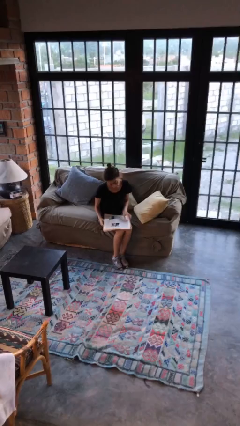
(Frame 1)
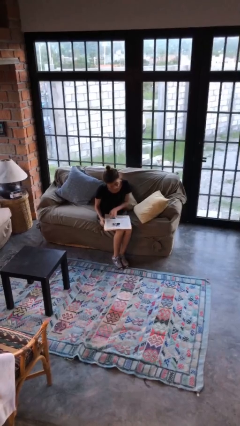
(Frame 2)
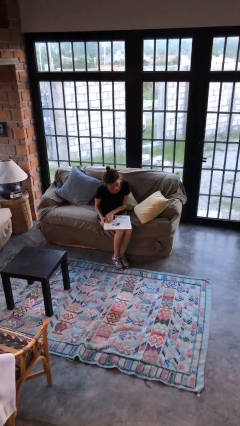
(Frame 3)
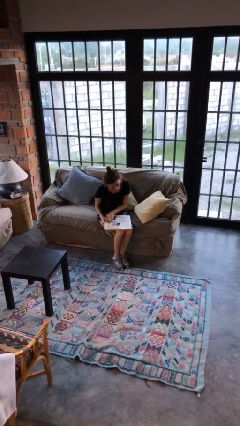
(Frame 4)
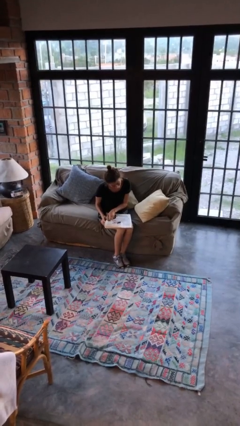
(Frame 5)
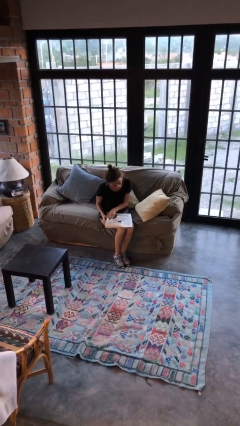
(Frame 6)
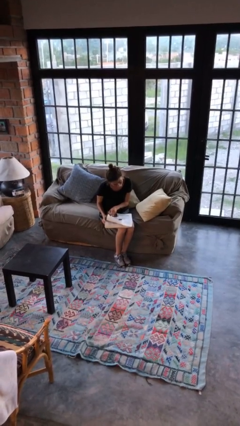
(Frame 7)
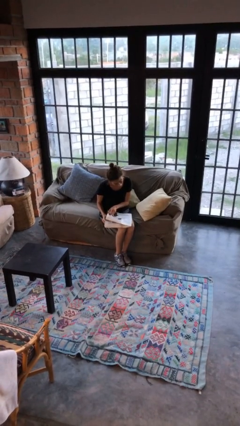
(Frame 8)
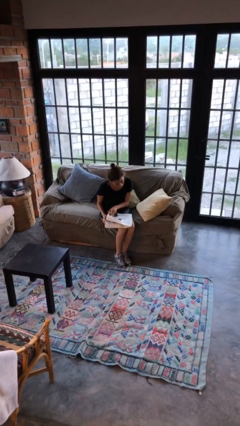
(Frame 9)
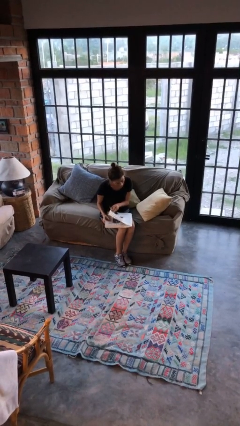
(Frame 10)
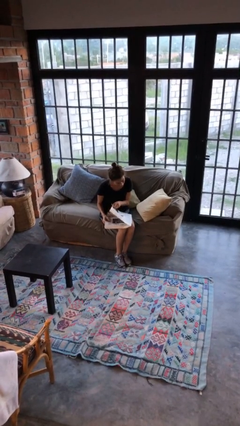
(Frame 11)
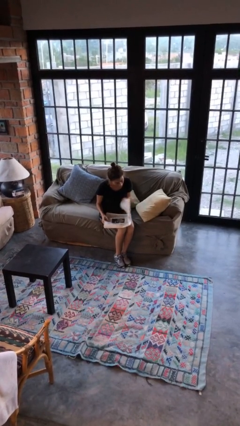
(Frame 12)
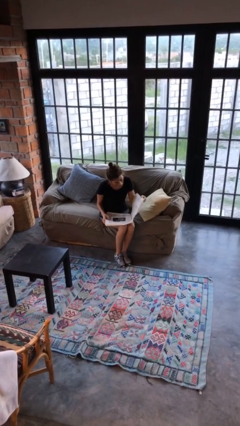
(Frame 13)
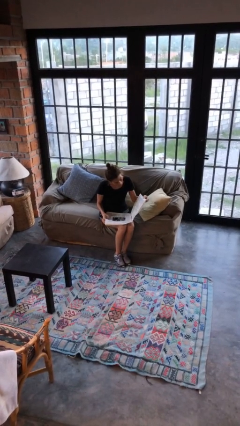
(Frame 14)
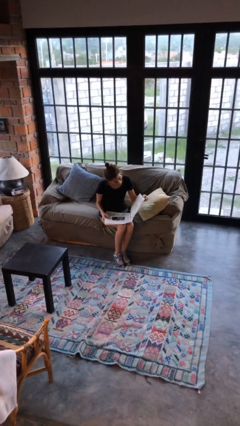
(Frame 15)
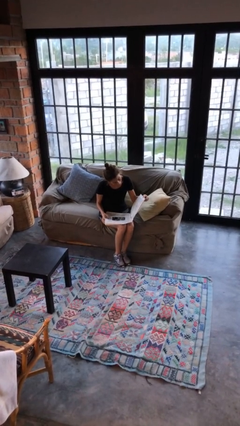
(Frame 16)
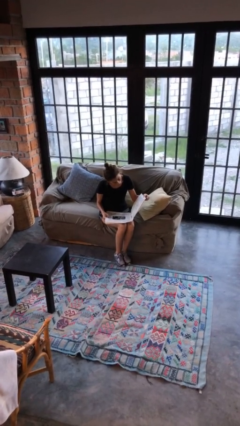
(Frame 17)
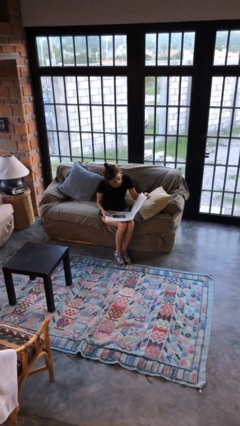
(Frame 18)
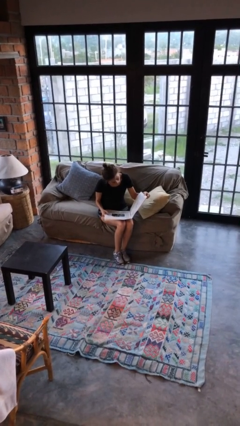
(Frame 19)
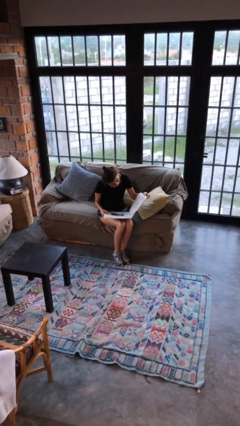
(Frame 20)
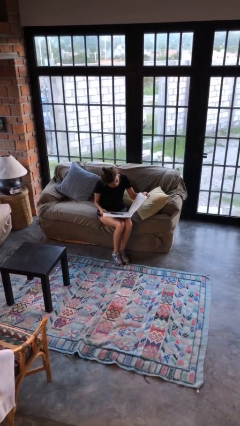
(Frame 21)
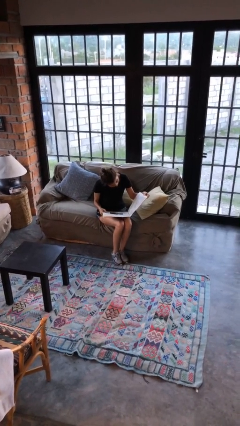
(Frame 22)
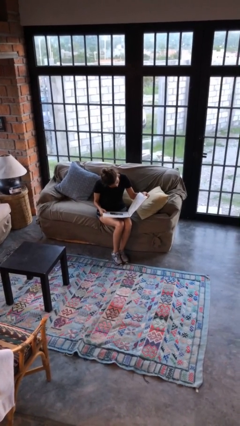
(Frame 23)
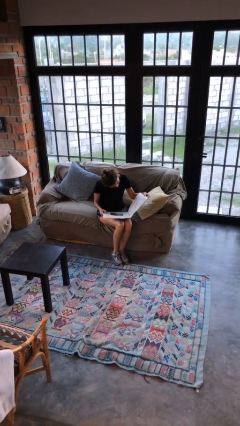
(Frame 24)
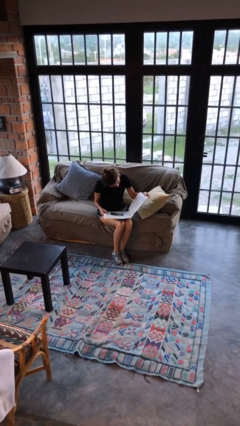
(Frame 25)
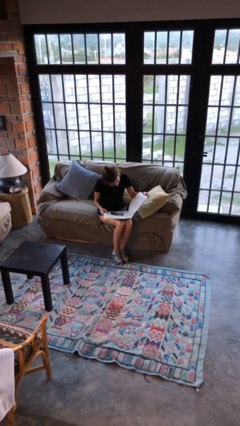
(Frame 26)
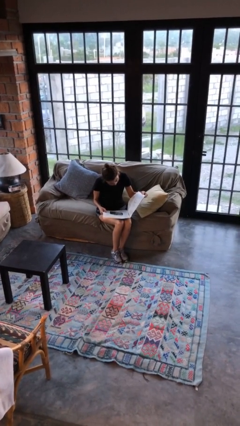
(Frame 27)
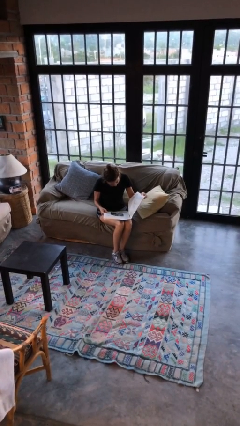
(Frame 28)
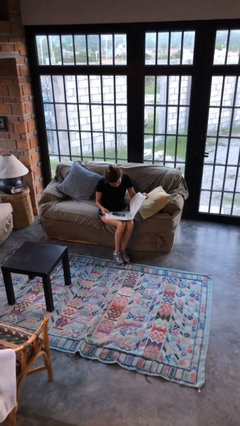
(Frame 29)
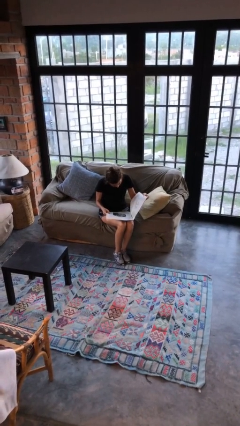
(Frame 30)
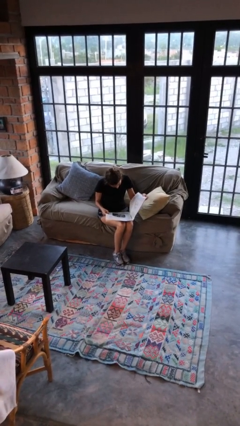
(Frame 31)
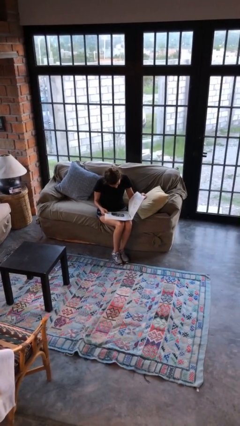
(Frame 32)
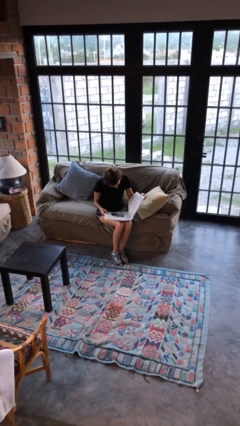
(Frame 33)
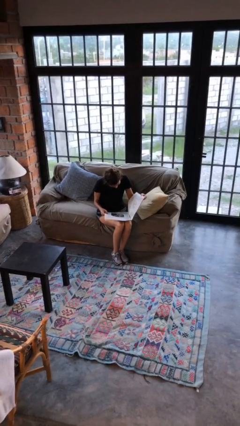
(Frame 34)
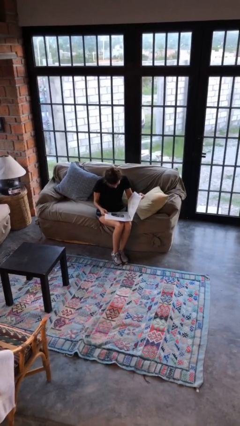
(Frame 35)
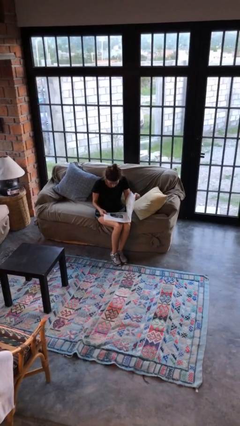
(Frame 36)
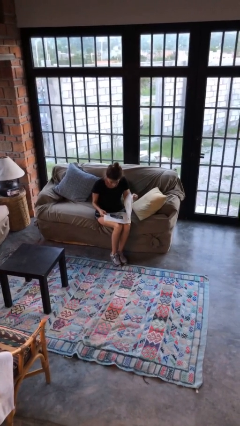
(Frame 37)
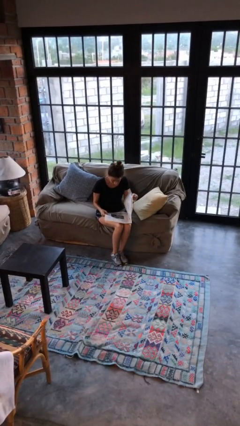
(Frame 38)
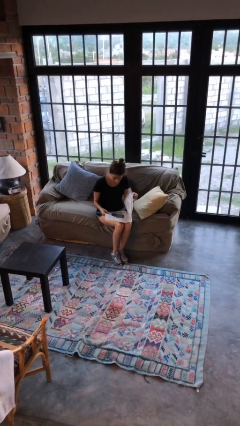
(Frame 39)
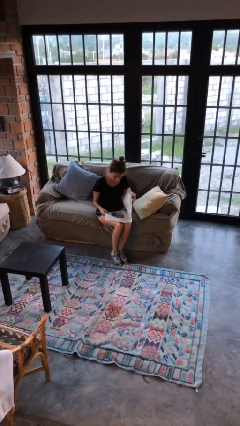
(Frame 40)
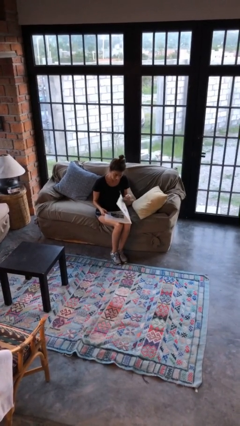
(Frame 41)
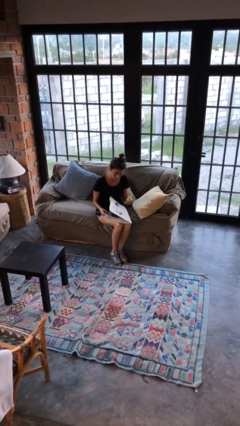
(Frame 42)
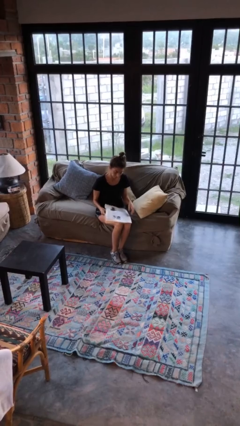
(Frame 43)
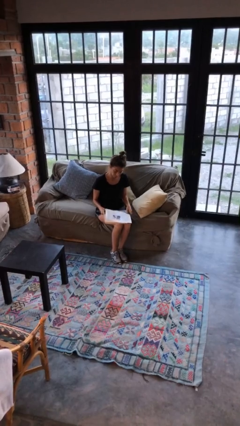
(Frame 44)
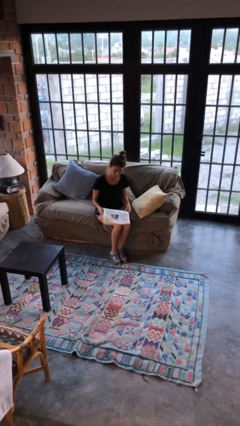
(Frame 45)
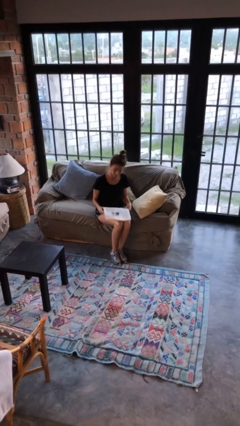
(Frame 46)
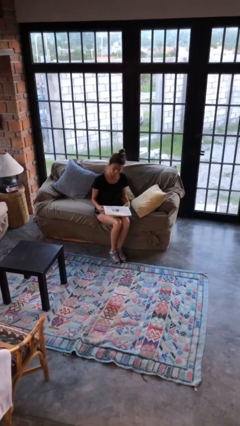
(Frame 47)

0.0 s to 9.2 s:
person reads newspaper

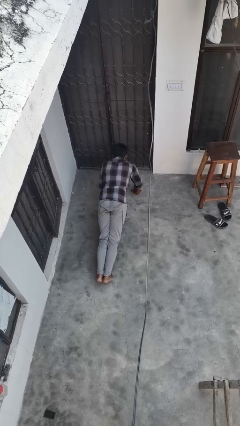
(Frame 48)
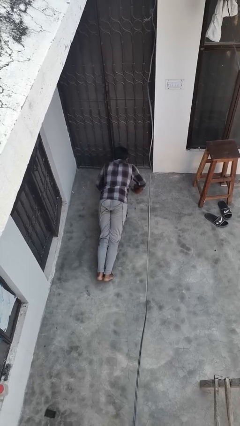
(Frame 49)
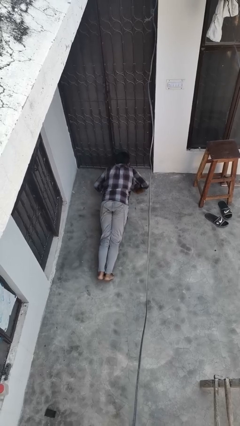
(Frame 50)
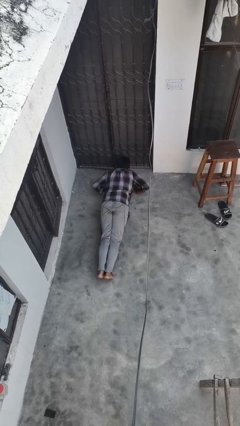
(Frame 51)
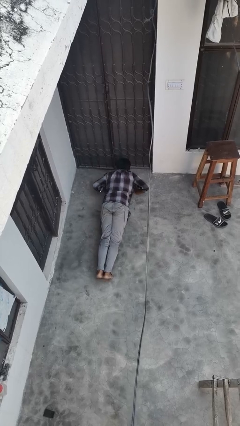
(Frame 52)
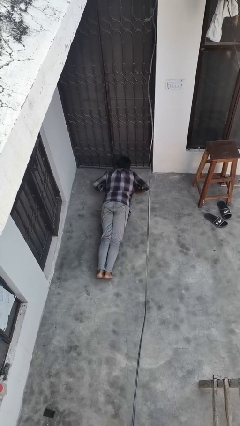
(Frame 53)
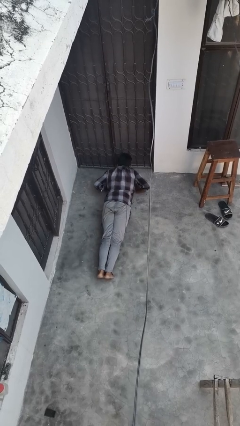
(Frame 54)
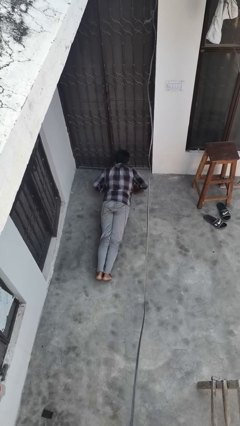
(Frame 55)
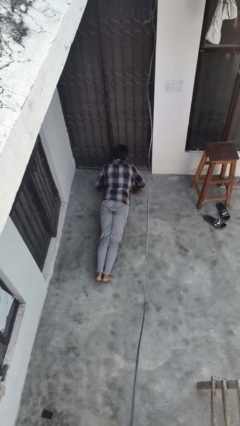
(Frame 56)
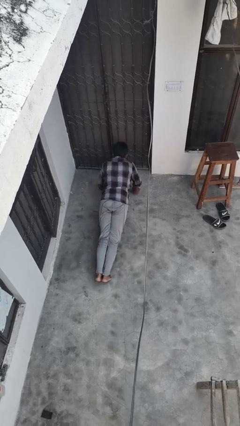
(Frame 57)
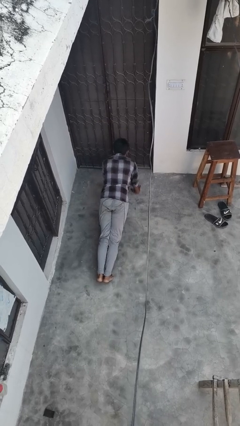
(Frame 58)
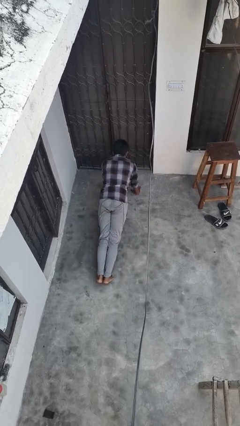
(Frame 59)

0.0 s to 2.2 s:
person exercises with pushup

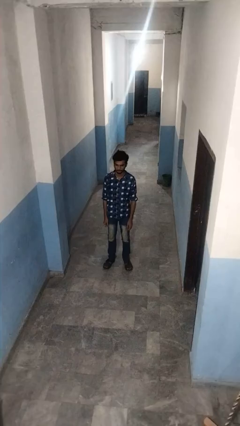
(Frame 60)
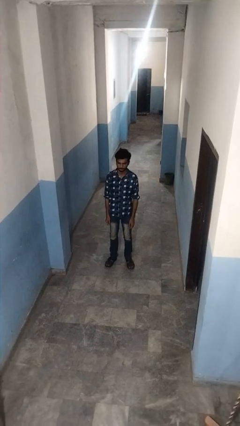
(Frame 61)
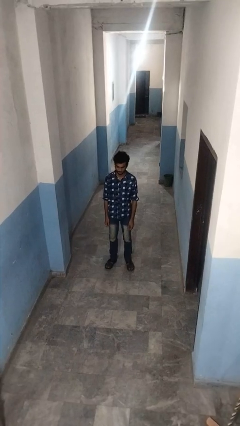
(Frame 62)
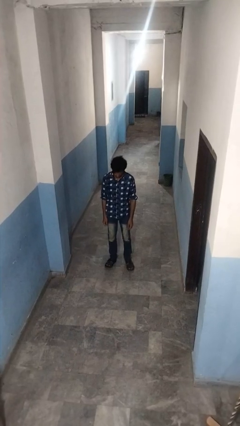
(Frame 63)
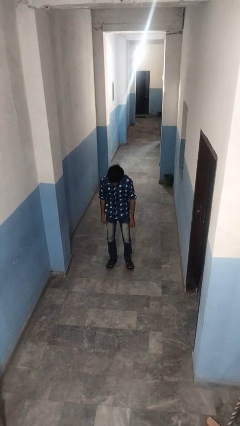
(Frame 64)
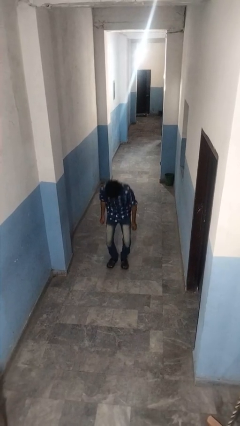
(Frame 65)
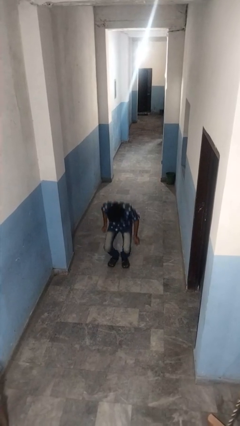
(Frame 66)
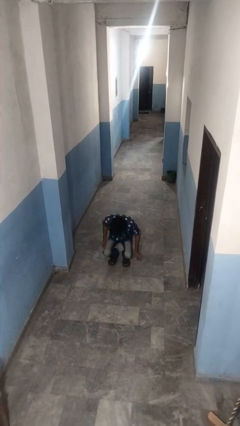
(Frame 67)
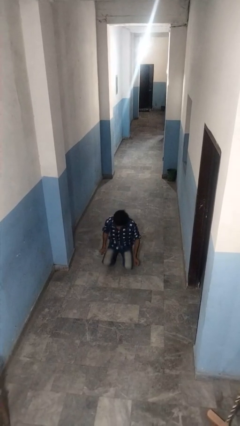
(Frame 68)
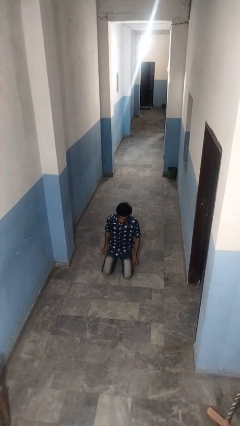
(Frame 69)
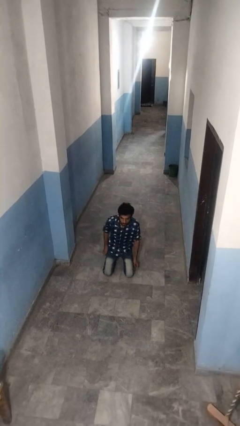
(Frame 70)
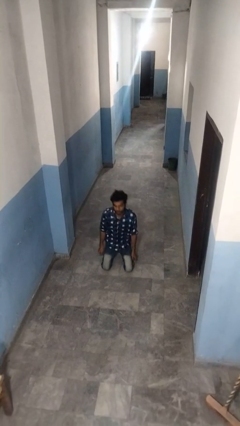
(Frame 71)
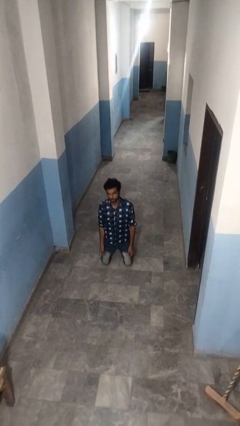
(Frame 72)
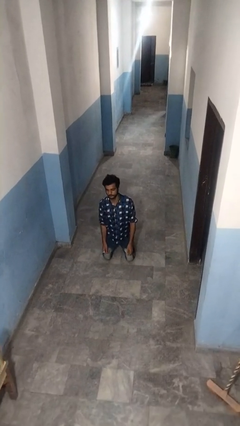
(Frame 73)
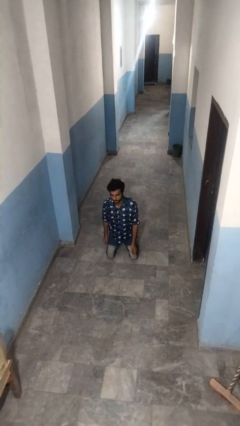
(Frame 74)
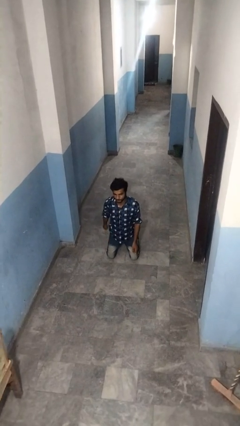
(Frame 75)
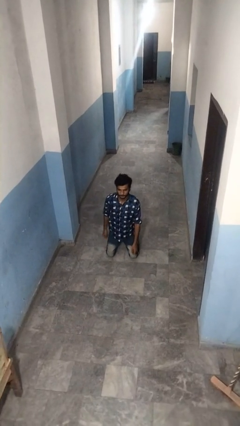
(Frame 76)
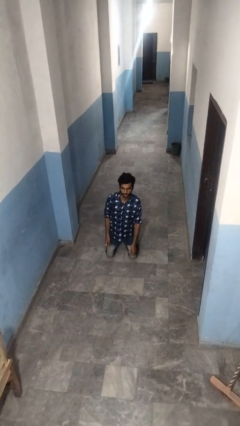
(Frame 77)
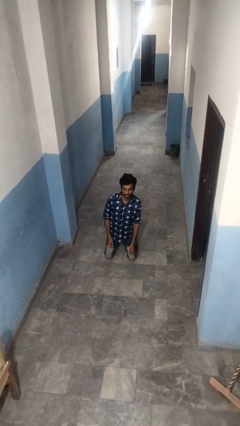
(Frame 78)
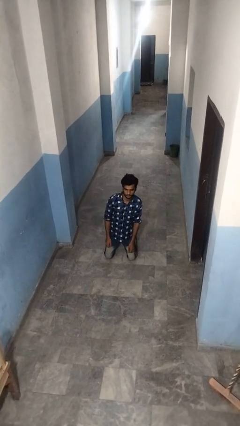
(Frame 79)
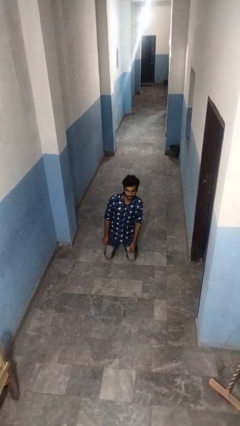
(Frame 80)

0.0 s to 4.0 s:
person kneels

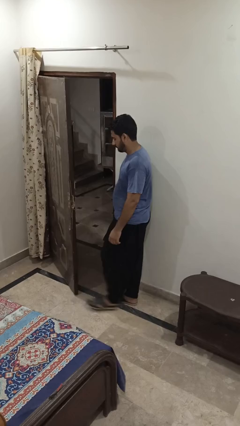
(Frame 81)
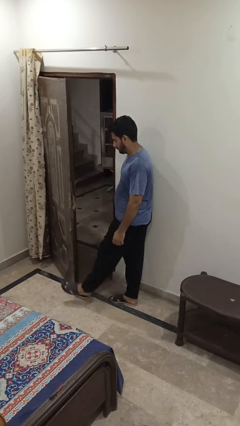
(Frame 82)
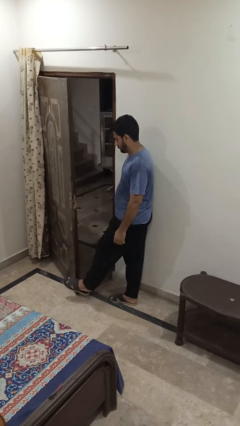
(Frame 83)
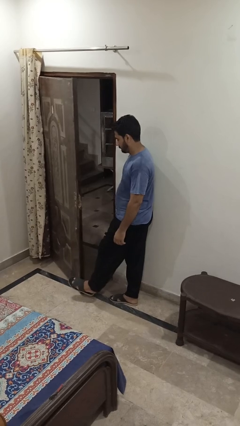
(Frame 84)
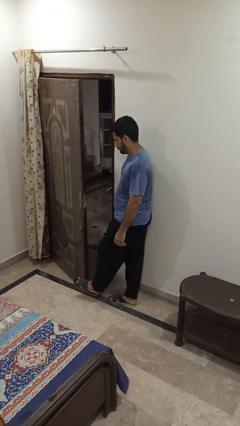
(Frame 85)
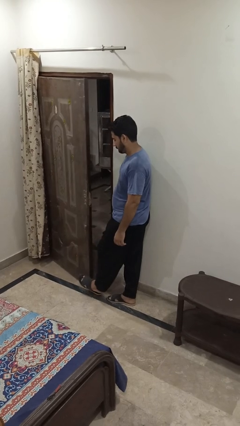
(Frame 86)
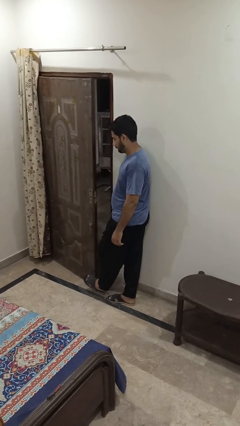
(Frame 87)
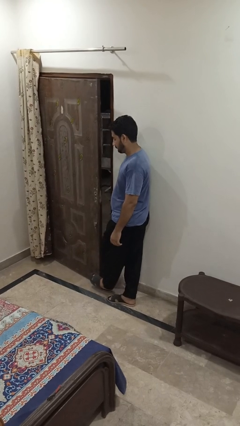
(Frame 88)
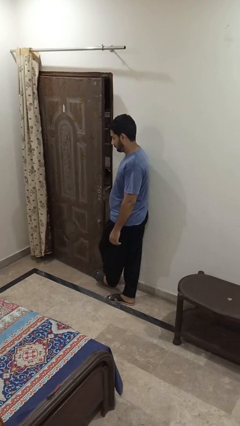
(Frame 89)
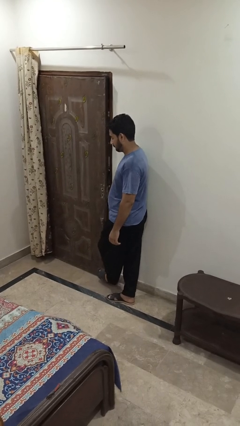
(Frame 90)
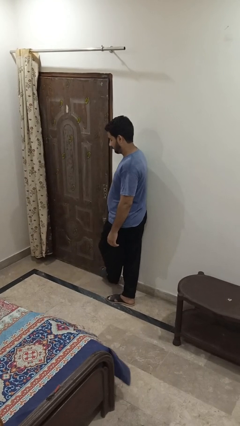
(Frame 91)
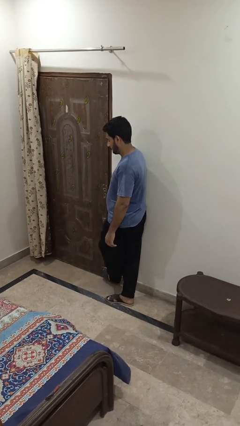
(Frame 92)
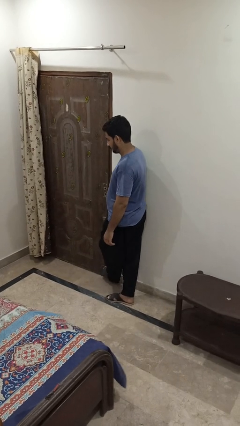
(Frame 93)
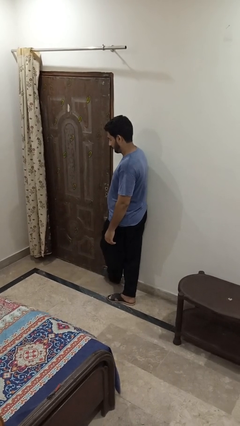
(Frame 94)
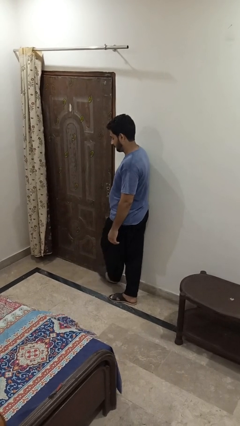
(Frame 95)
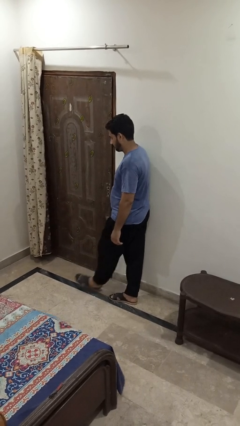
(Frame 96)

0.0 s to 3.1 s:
person closes door with foot
